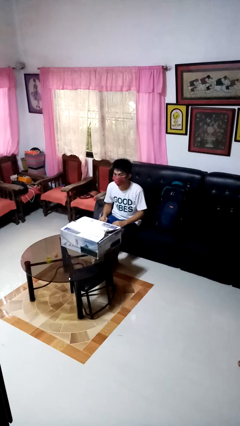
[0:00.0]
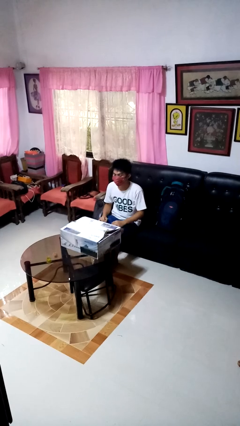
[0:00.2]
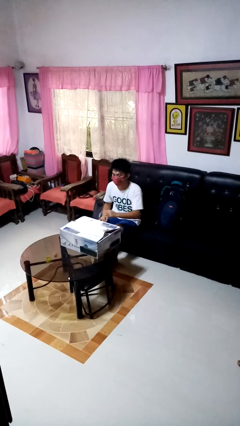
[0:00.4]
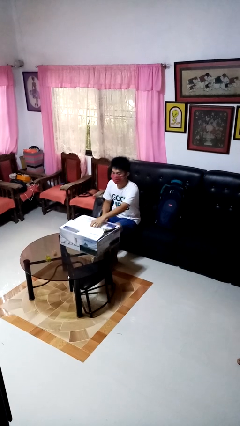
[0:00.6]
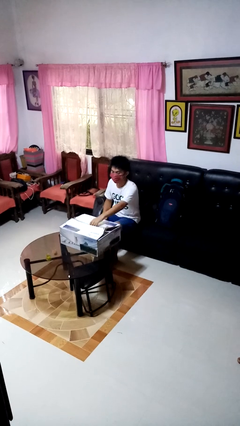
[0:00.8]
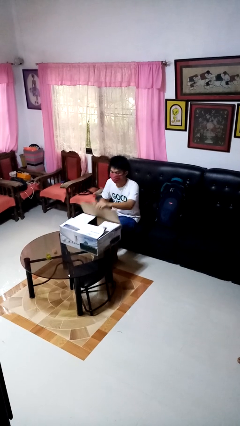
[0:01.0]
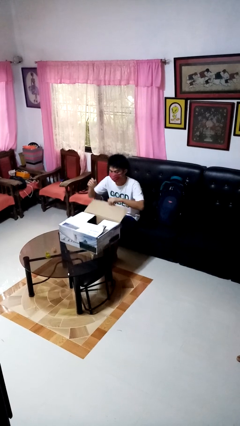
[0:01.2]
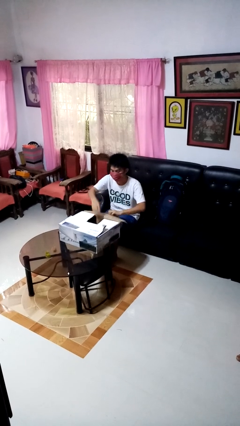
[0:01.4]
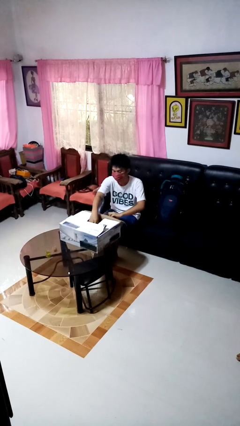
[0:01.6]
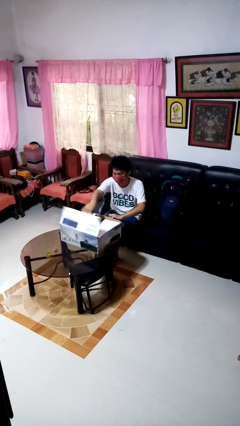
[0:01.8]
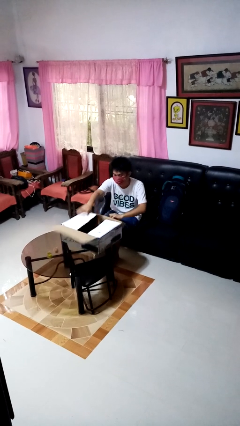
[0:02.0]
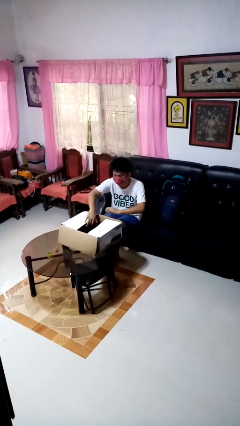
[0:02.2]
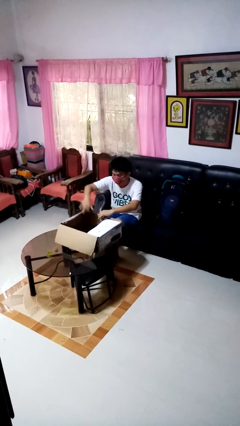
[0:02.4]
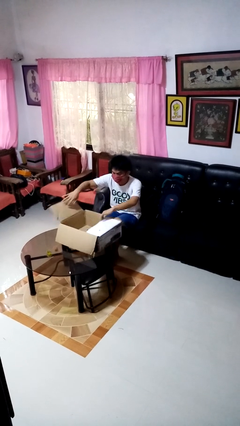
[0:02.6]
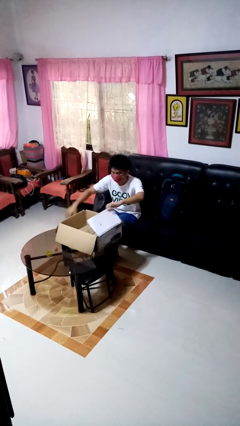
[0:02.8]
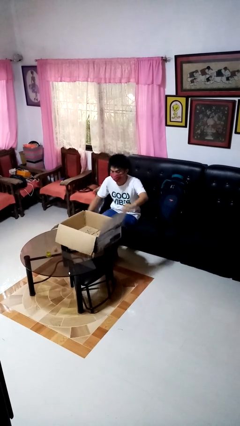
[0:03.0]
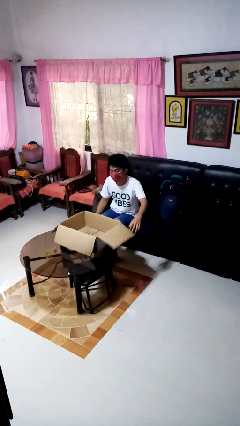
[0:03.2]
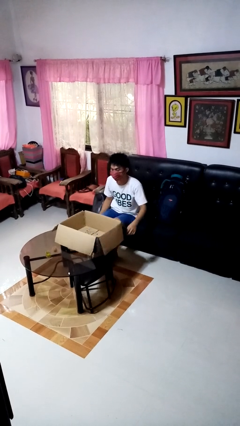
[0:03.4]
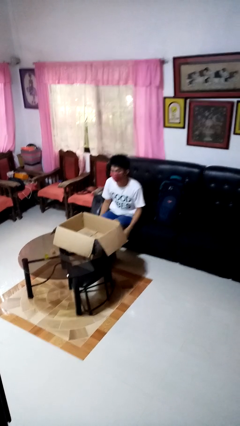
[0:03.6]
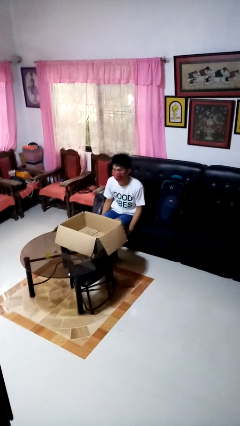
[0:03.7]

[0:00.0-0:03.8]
person opens box

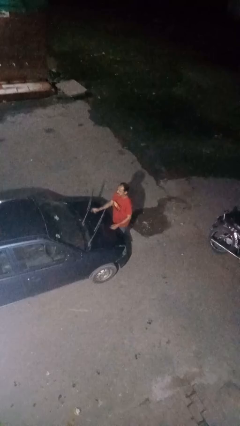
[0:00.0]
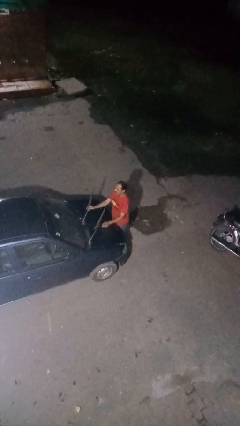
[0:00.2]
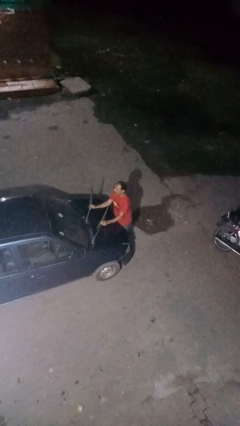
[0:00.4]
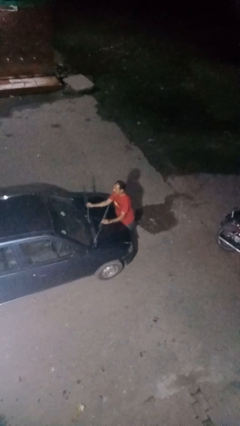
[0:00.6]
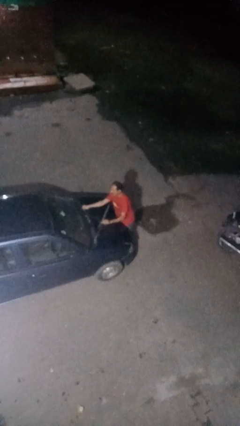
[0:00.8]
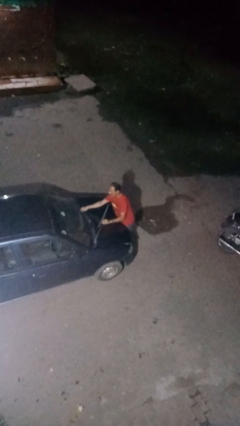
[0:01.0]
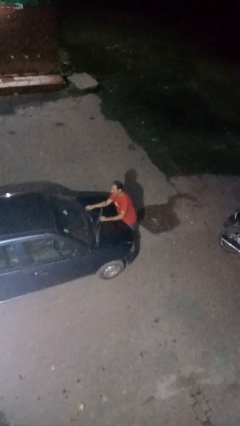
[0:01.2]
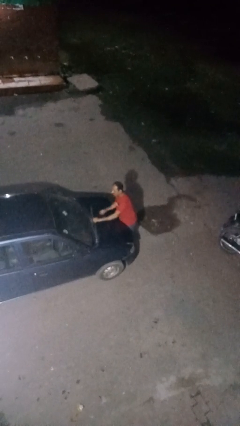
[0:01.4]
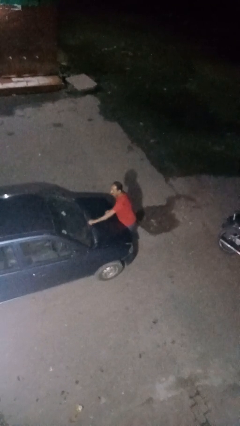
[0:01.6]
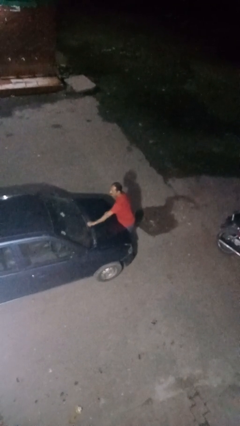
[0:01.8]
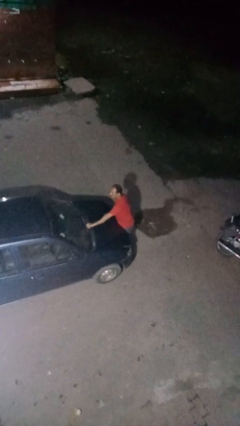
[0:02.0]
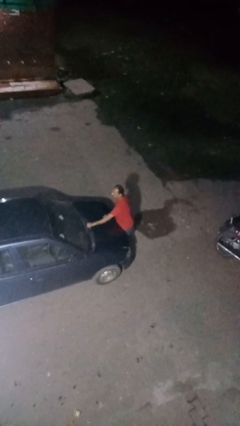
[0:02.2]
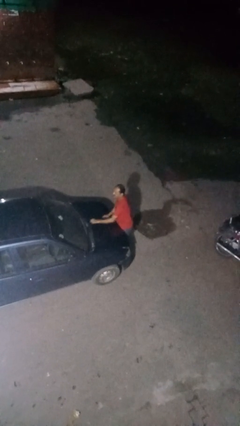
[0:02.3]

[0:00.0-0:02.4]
person flips down car wipers

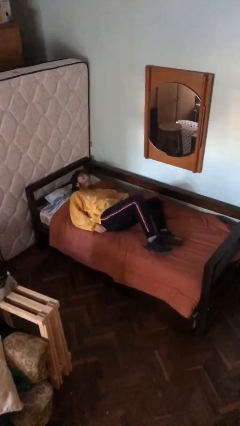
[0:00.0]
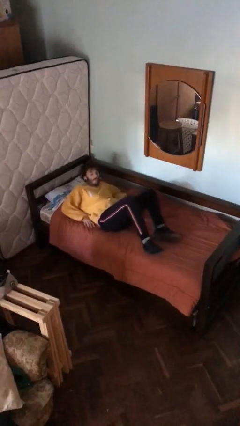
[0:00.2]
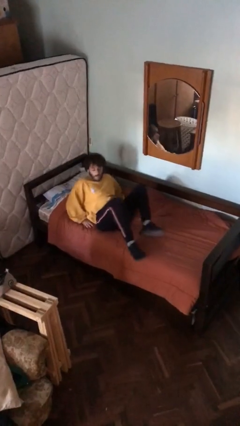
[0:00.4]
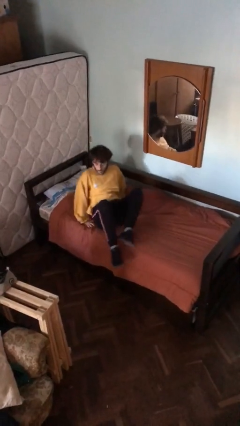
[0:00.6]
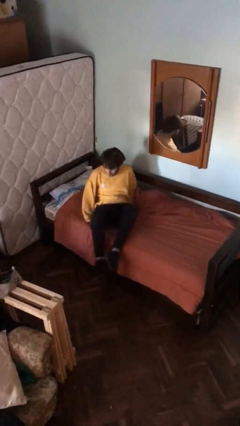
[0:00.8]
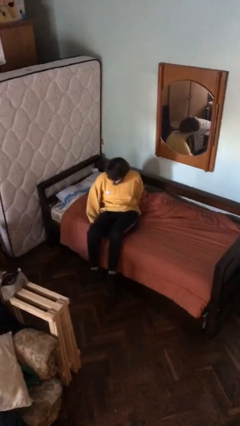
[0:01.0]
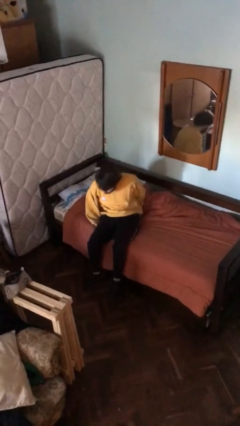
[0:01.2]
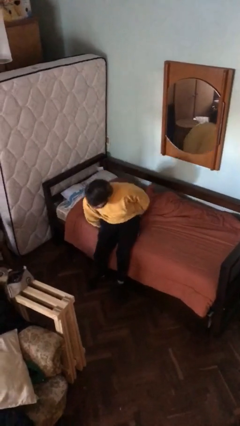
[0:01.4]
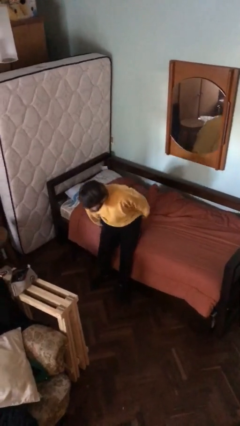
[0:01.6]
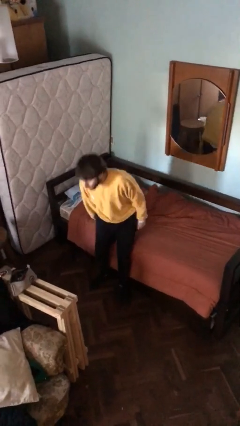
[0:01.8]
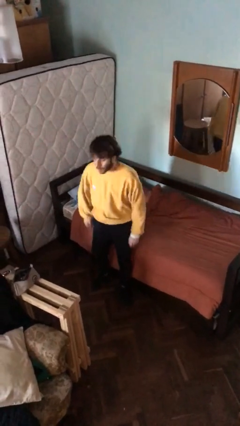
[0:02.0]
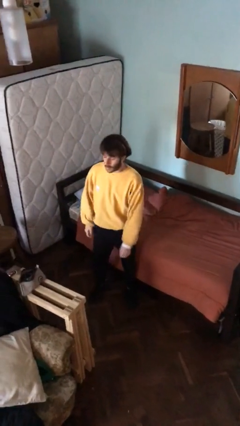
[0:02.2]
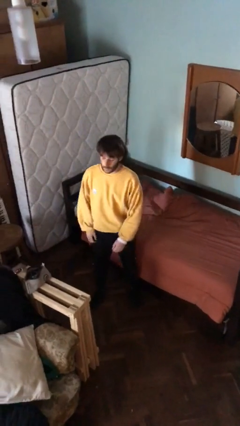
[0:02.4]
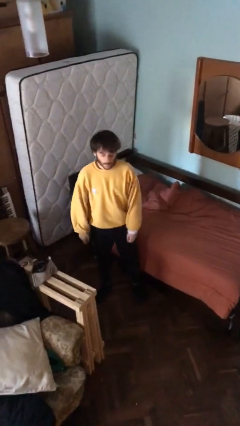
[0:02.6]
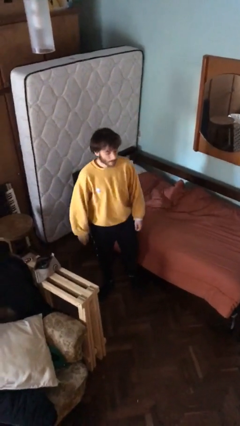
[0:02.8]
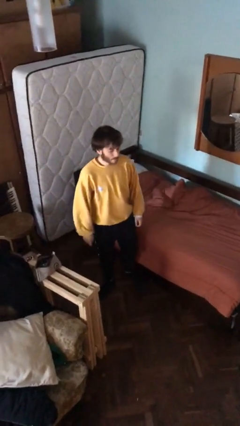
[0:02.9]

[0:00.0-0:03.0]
person stands up

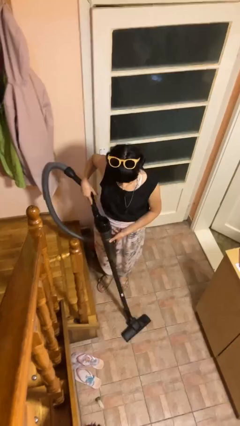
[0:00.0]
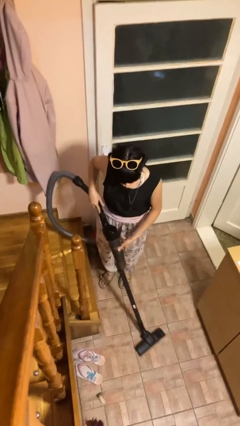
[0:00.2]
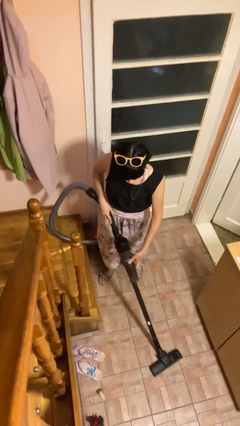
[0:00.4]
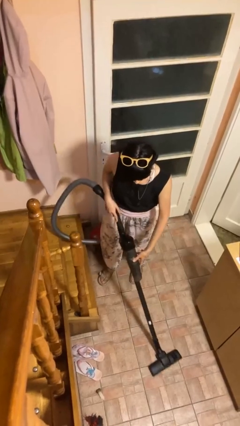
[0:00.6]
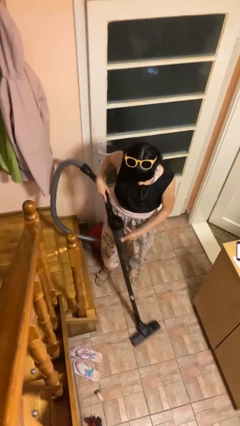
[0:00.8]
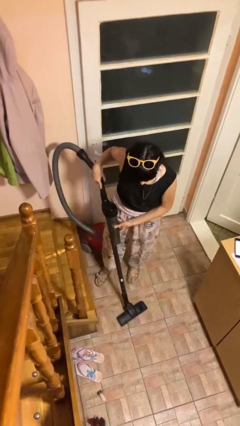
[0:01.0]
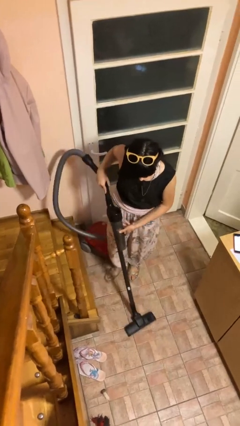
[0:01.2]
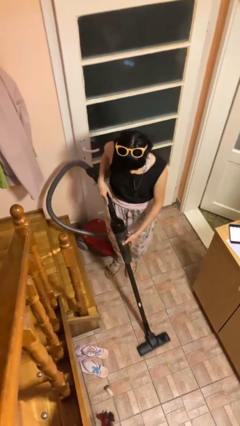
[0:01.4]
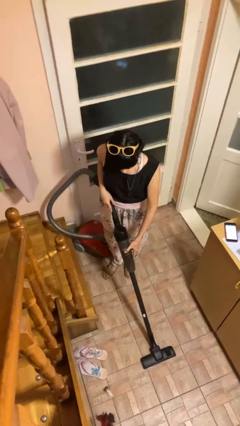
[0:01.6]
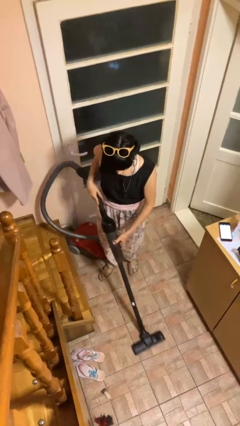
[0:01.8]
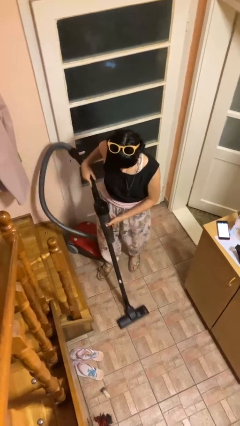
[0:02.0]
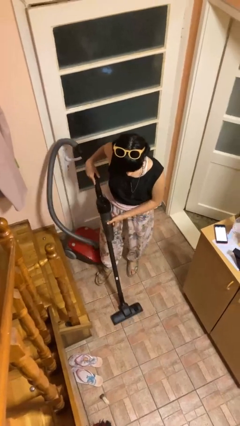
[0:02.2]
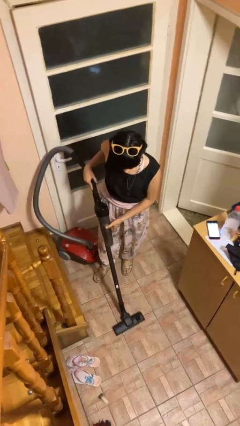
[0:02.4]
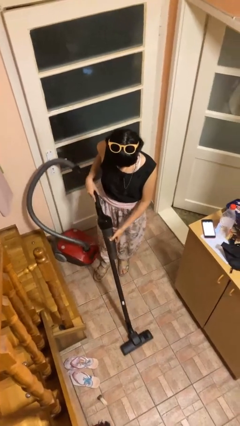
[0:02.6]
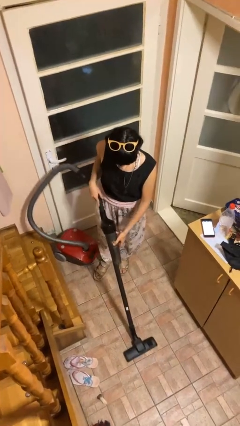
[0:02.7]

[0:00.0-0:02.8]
person vacuums carpet

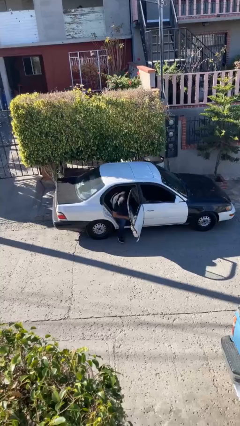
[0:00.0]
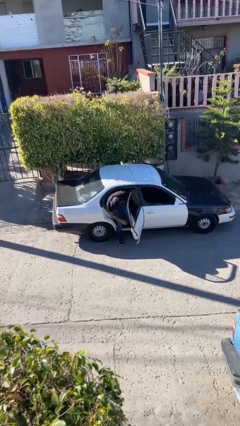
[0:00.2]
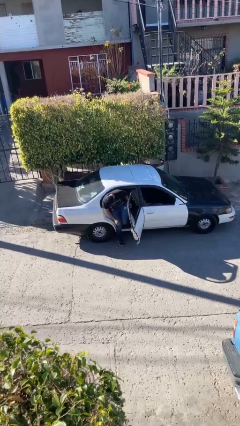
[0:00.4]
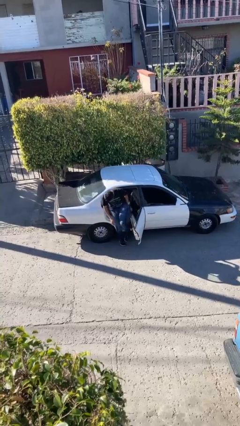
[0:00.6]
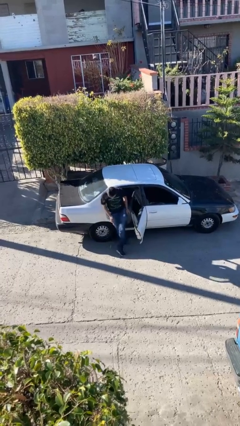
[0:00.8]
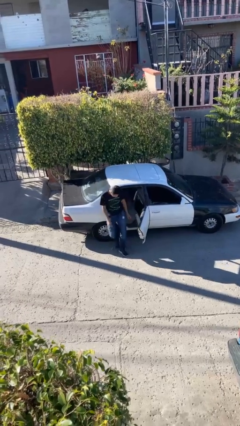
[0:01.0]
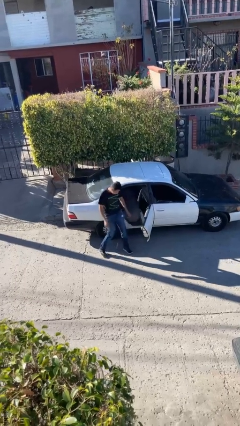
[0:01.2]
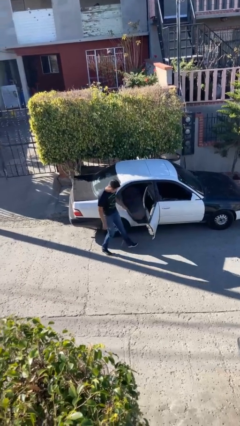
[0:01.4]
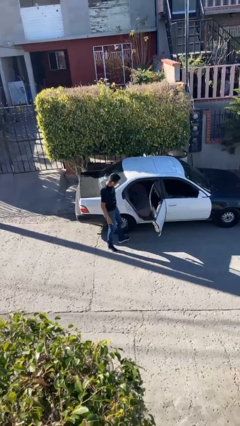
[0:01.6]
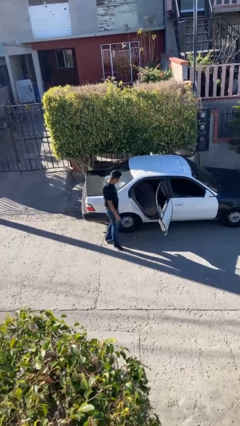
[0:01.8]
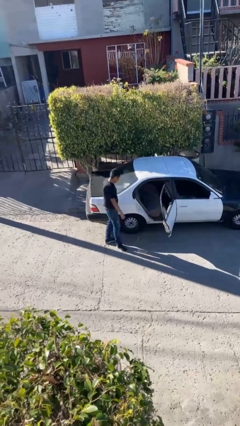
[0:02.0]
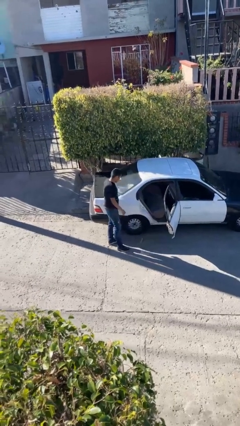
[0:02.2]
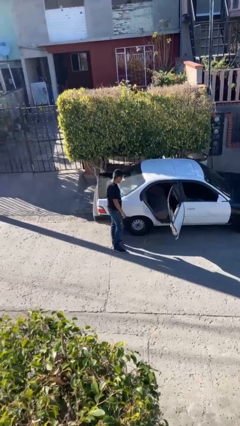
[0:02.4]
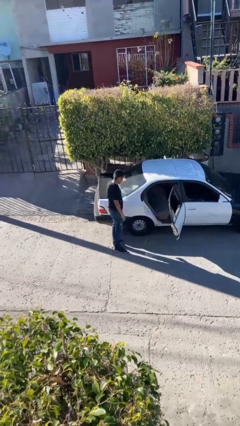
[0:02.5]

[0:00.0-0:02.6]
person exits car

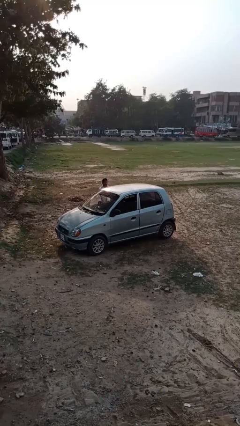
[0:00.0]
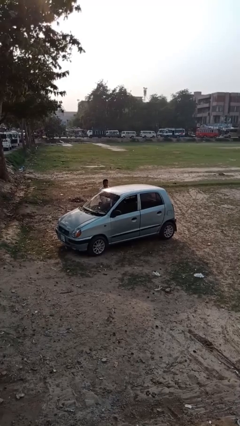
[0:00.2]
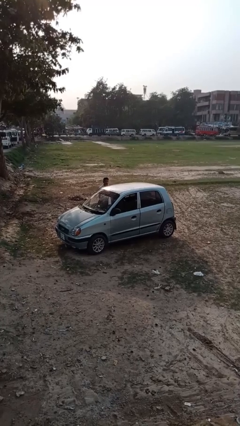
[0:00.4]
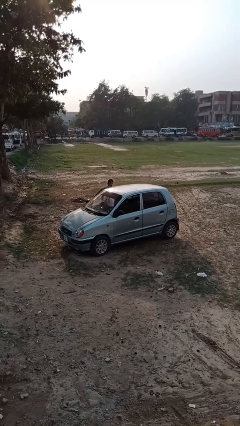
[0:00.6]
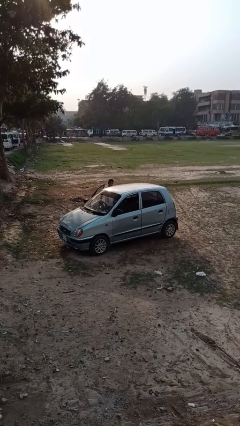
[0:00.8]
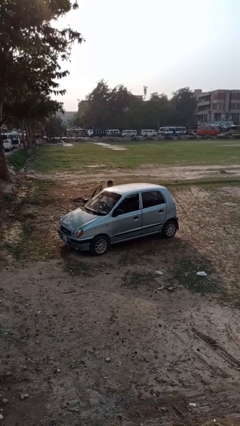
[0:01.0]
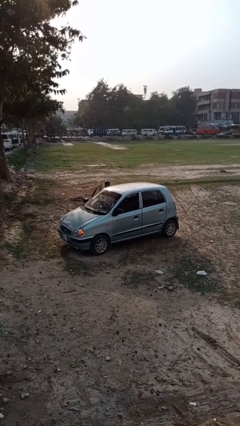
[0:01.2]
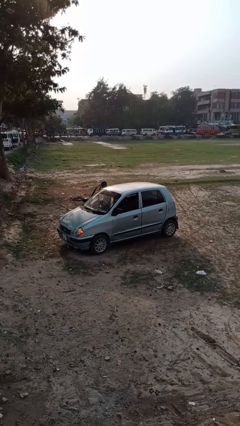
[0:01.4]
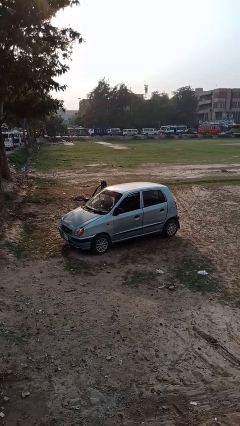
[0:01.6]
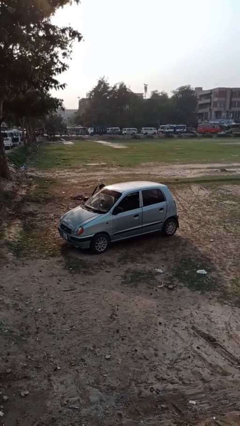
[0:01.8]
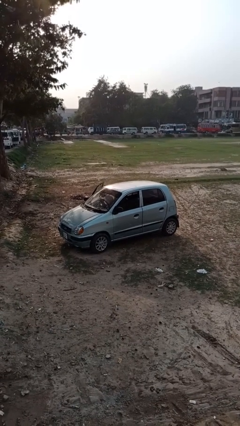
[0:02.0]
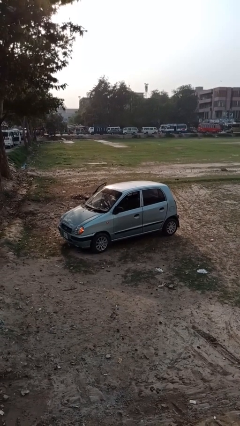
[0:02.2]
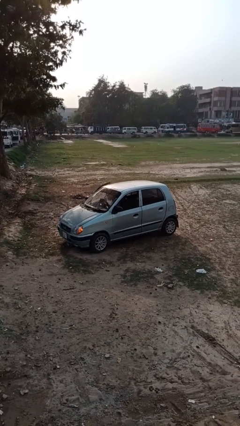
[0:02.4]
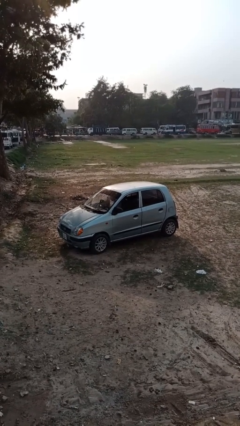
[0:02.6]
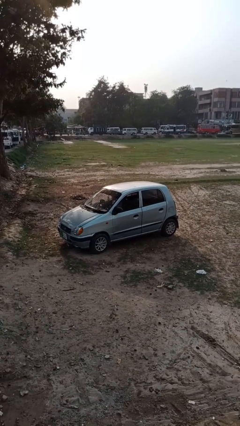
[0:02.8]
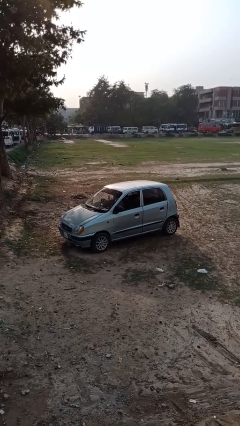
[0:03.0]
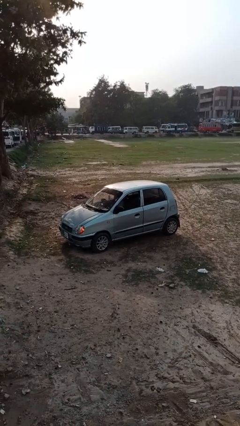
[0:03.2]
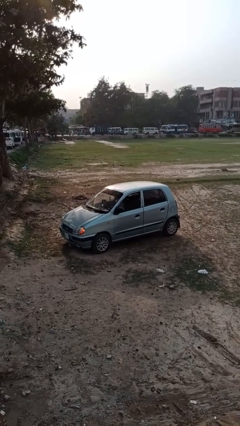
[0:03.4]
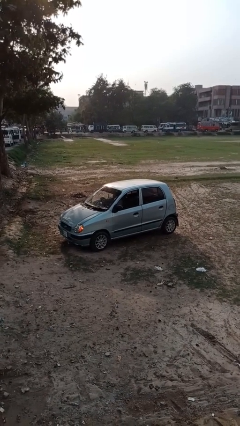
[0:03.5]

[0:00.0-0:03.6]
car picks up person
